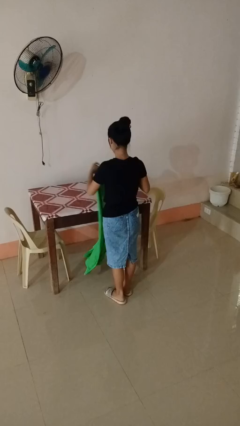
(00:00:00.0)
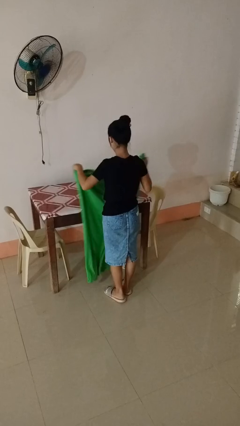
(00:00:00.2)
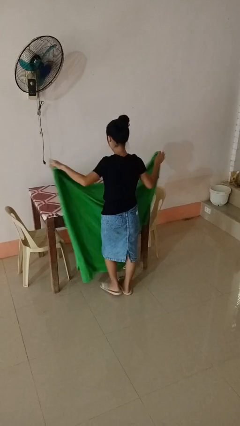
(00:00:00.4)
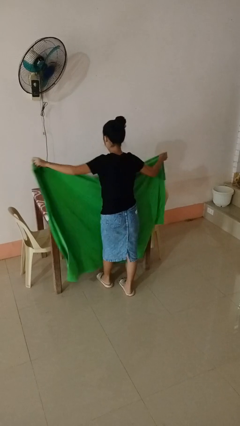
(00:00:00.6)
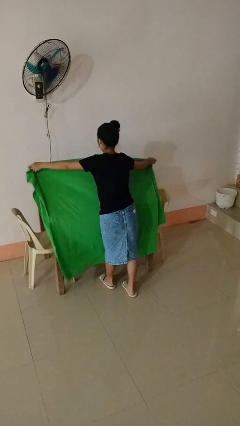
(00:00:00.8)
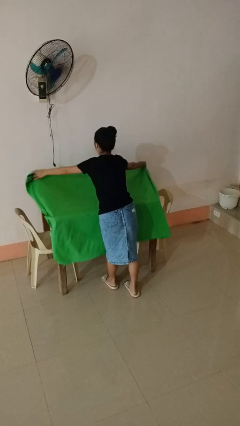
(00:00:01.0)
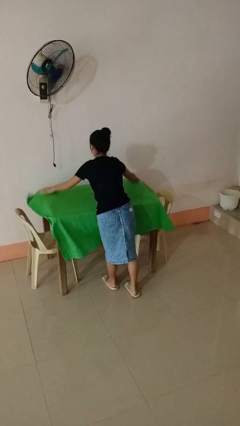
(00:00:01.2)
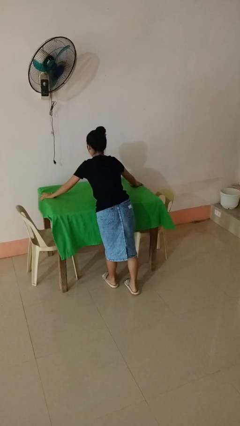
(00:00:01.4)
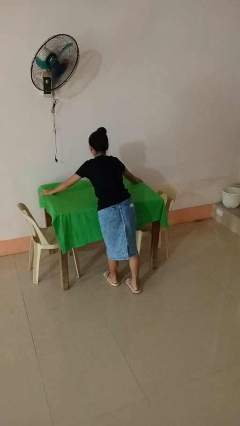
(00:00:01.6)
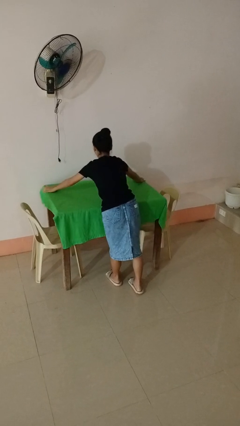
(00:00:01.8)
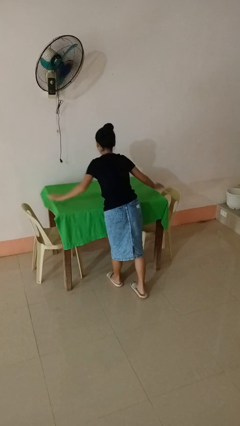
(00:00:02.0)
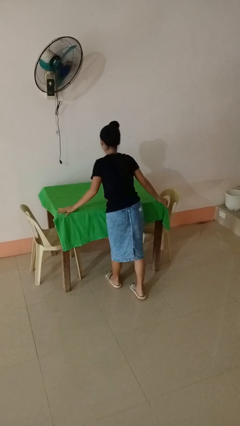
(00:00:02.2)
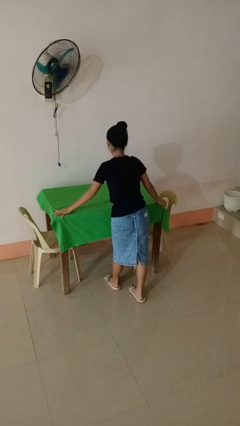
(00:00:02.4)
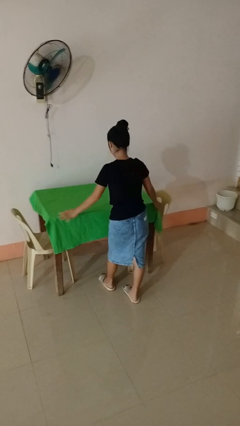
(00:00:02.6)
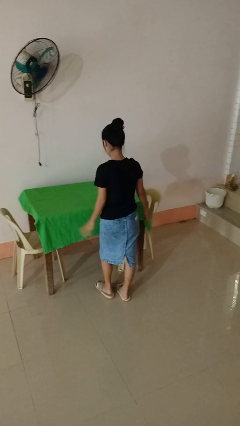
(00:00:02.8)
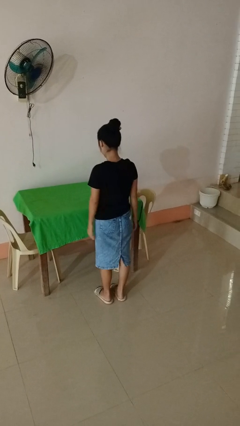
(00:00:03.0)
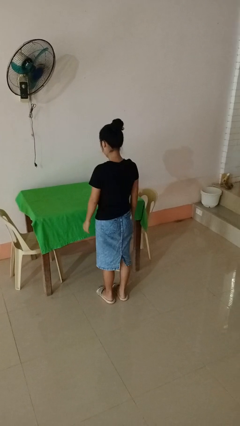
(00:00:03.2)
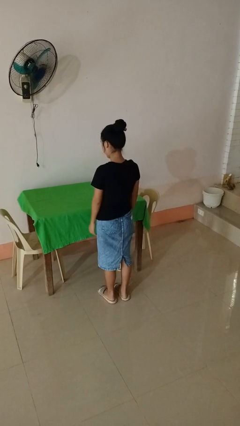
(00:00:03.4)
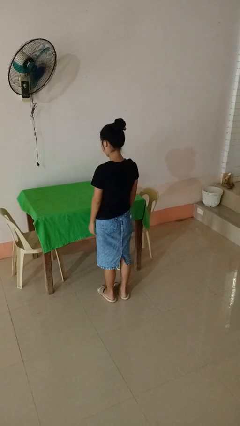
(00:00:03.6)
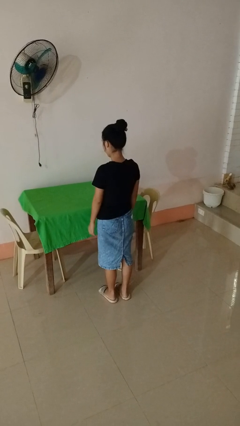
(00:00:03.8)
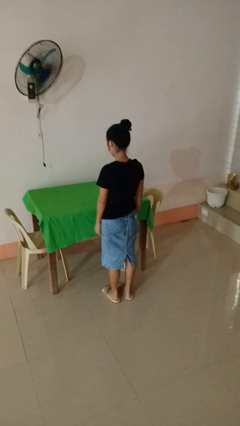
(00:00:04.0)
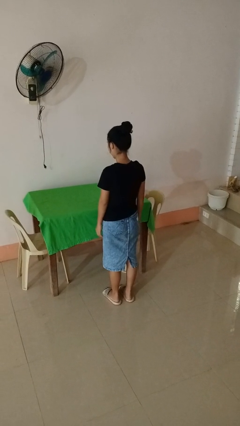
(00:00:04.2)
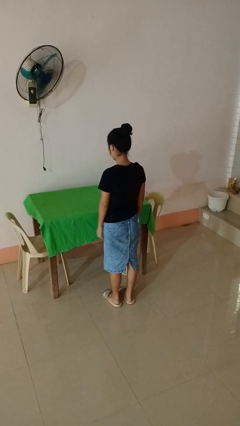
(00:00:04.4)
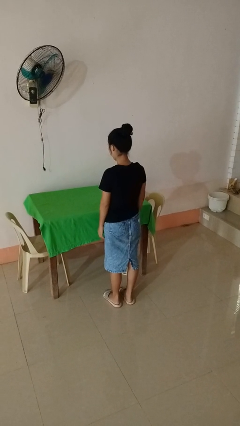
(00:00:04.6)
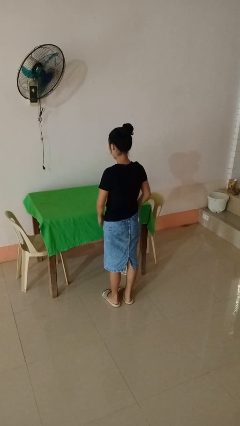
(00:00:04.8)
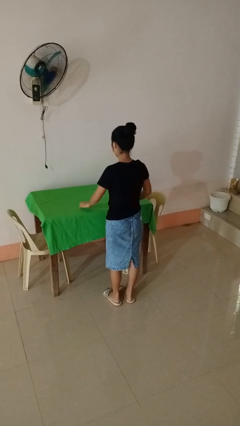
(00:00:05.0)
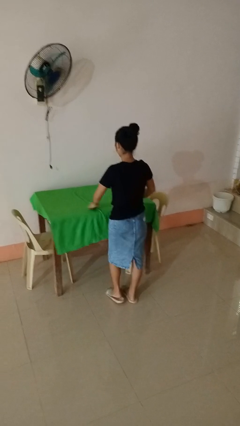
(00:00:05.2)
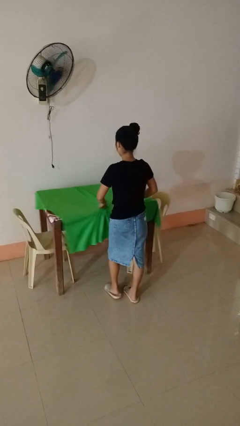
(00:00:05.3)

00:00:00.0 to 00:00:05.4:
person spreads tablecloth

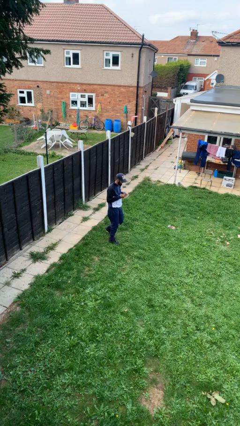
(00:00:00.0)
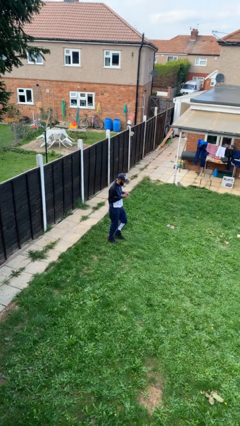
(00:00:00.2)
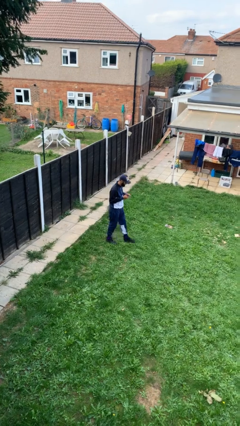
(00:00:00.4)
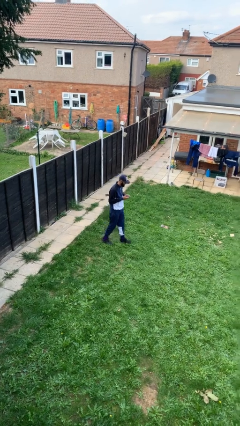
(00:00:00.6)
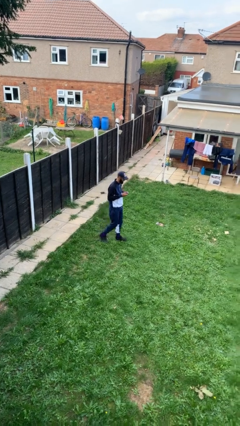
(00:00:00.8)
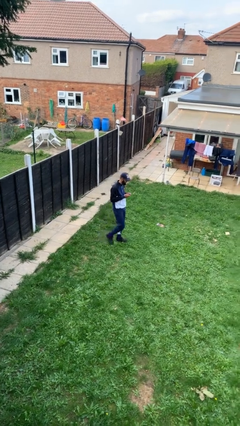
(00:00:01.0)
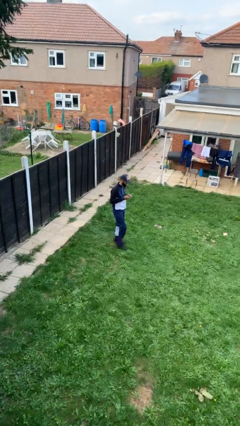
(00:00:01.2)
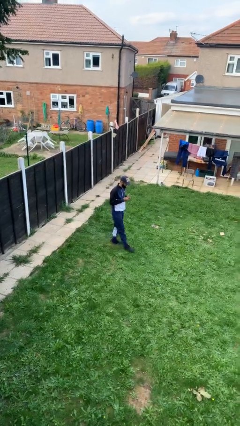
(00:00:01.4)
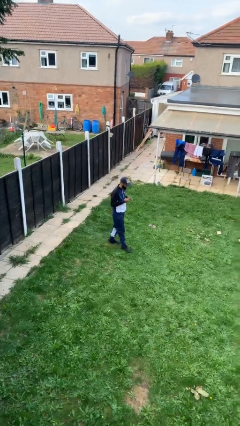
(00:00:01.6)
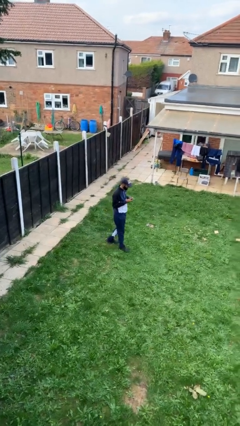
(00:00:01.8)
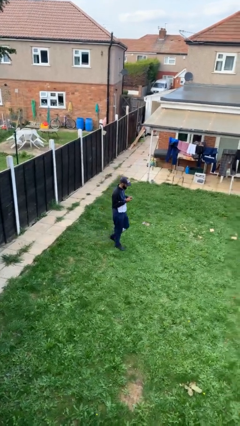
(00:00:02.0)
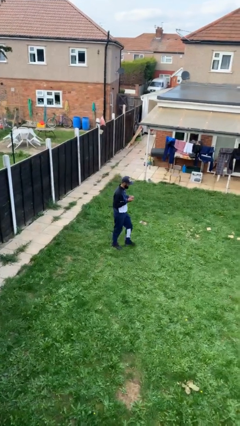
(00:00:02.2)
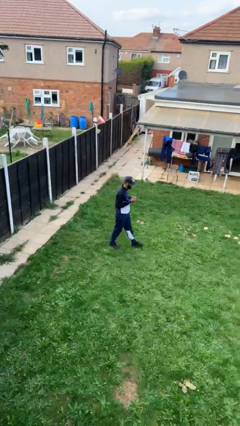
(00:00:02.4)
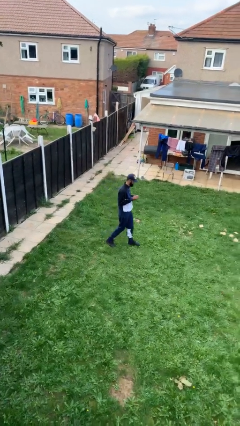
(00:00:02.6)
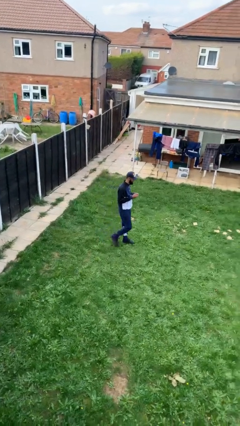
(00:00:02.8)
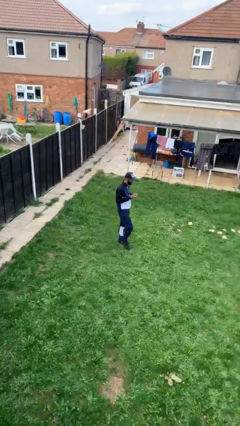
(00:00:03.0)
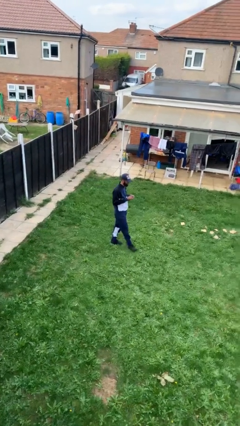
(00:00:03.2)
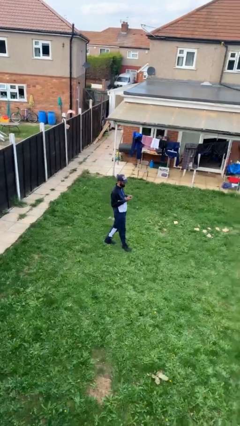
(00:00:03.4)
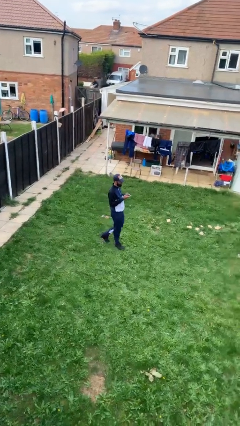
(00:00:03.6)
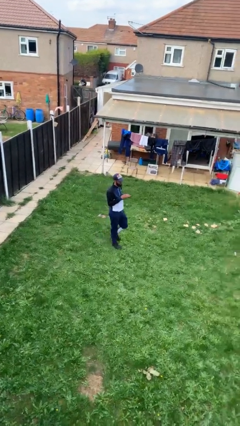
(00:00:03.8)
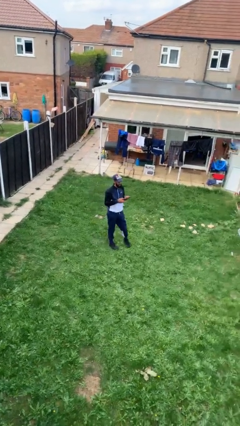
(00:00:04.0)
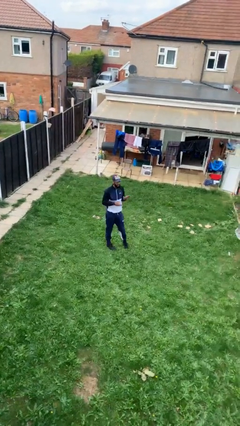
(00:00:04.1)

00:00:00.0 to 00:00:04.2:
person texts on phone

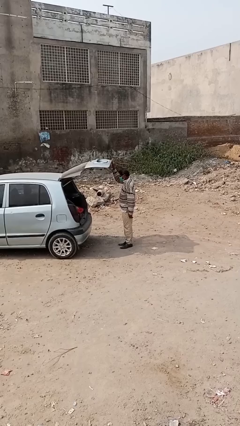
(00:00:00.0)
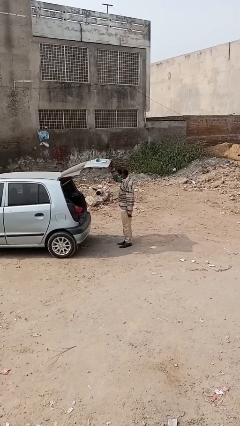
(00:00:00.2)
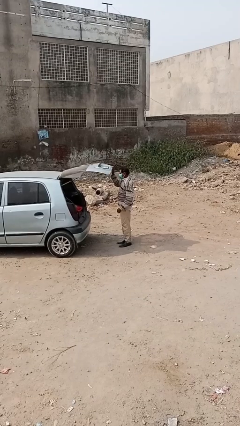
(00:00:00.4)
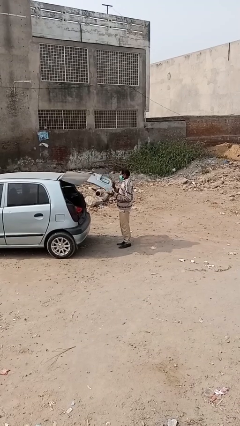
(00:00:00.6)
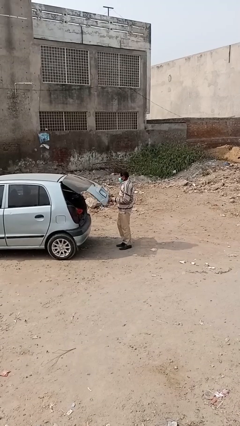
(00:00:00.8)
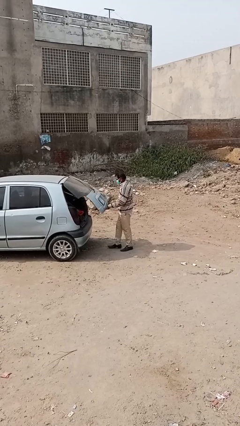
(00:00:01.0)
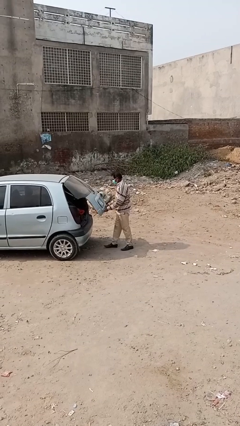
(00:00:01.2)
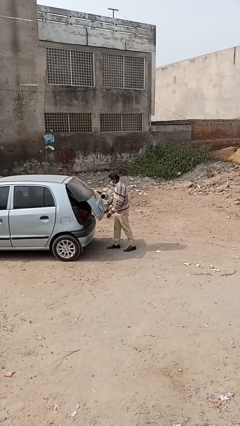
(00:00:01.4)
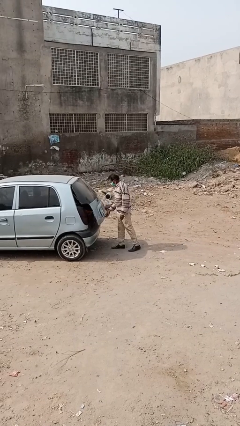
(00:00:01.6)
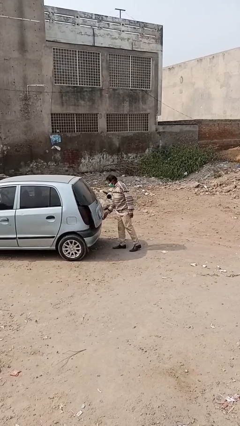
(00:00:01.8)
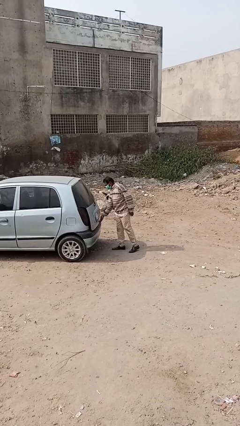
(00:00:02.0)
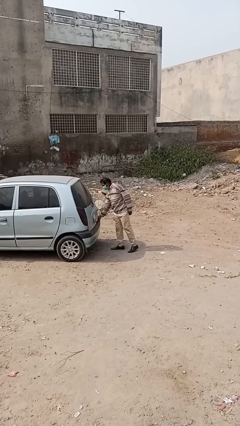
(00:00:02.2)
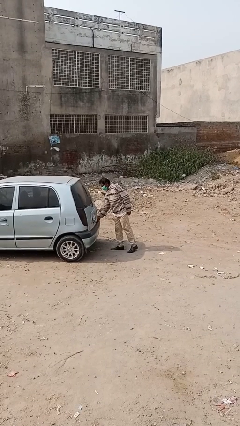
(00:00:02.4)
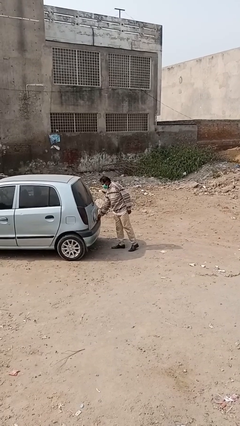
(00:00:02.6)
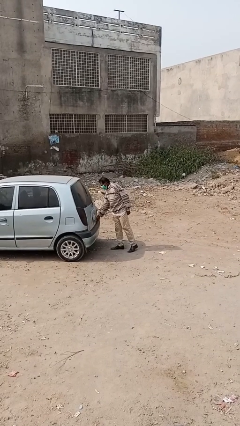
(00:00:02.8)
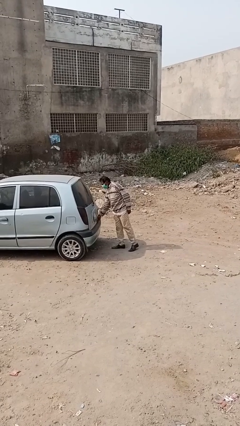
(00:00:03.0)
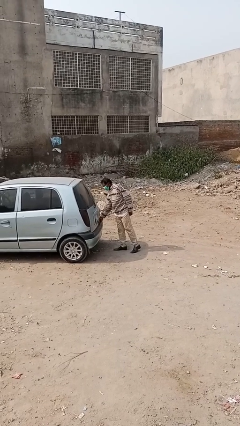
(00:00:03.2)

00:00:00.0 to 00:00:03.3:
person closes car trunk

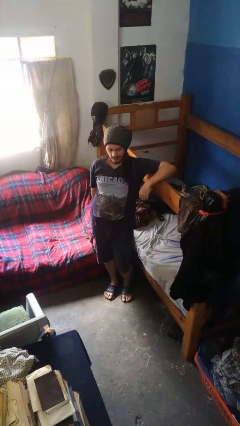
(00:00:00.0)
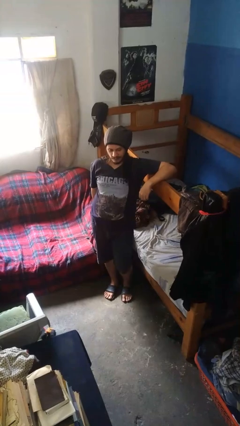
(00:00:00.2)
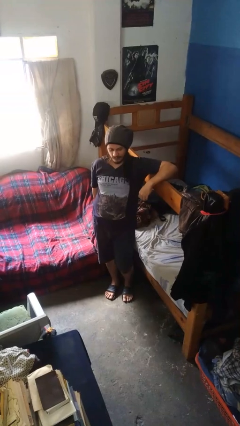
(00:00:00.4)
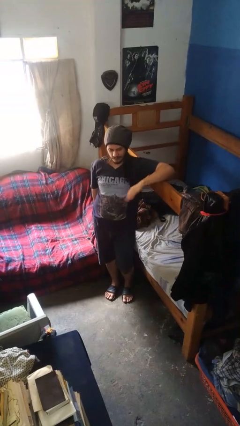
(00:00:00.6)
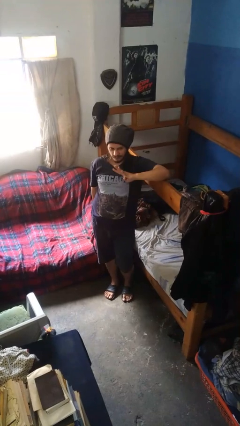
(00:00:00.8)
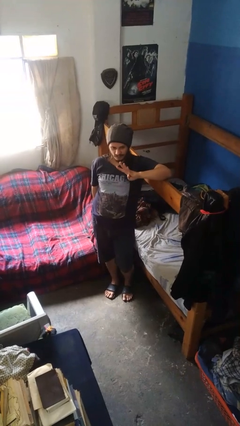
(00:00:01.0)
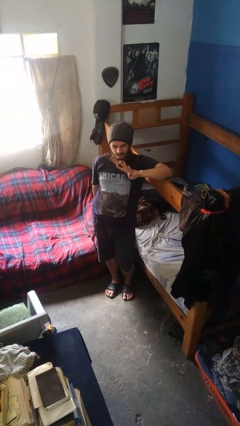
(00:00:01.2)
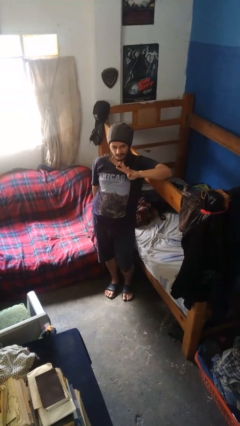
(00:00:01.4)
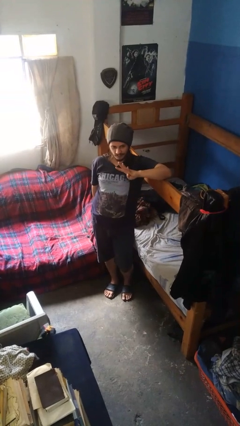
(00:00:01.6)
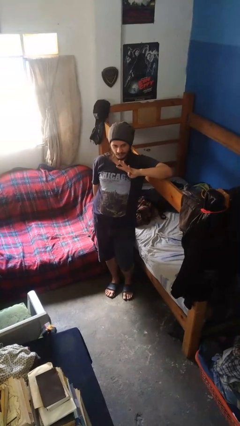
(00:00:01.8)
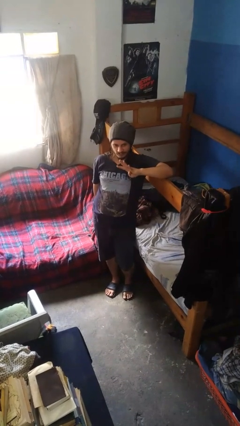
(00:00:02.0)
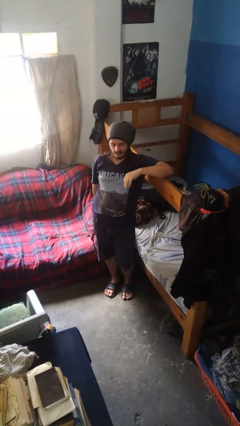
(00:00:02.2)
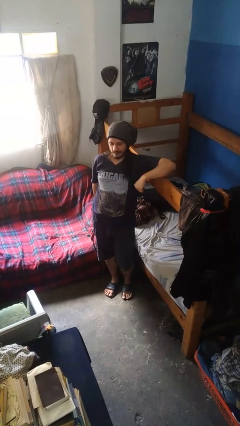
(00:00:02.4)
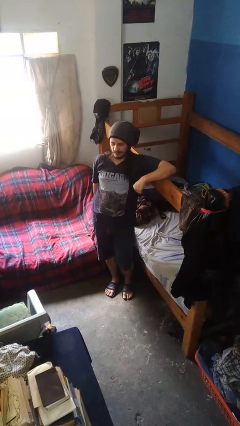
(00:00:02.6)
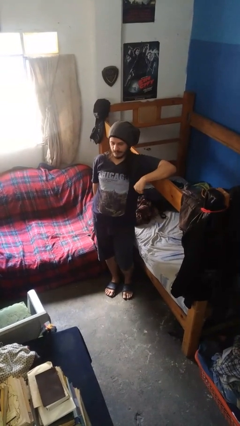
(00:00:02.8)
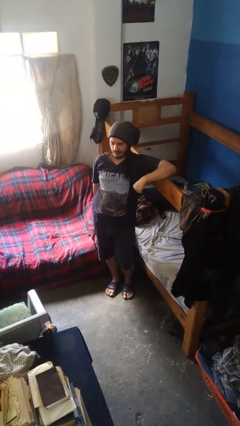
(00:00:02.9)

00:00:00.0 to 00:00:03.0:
person gestures number four

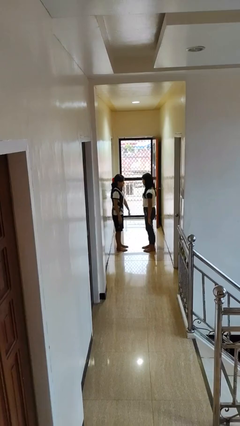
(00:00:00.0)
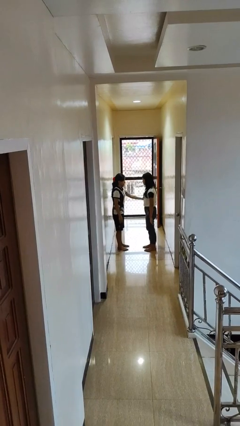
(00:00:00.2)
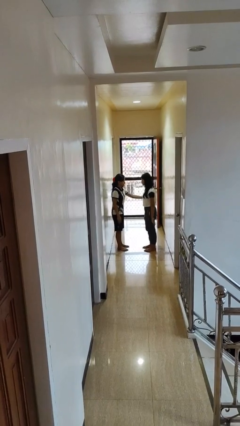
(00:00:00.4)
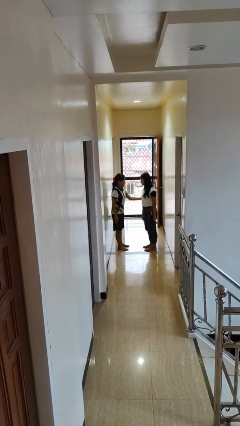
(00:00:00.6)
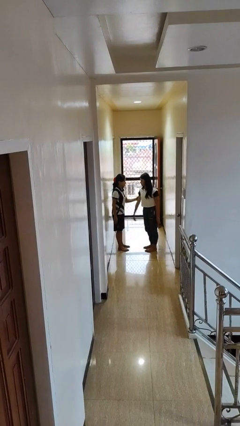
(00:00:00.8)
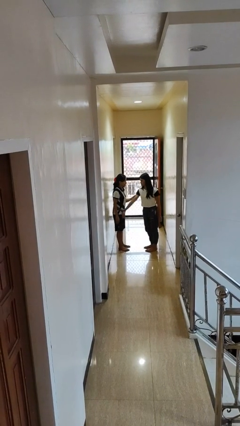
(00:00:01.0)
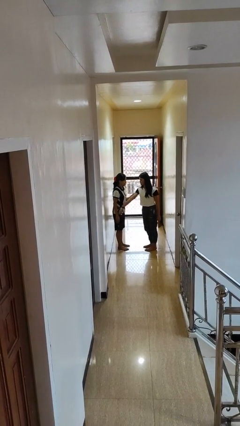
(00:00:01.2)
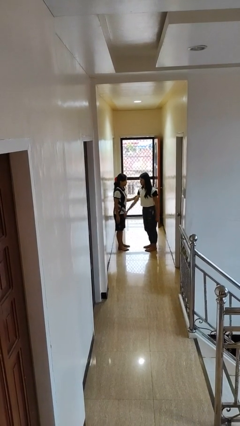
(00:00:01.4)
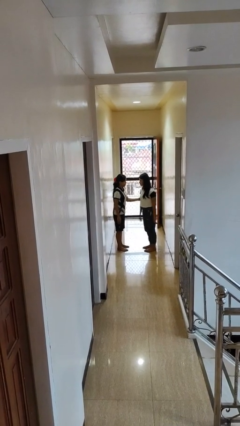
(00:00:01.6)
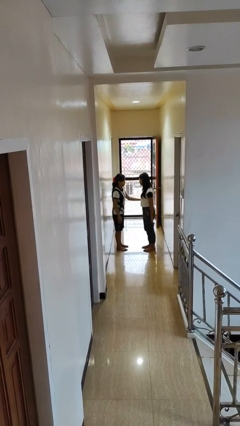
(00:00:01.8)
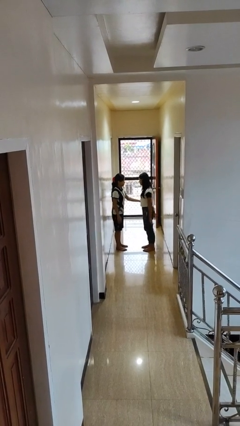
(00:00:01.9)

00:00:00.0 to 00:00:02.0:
person grabs person by bicep
